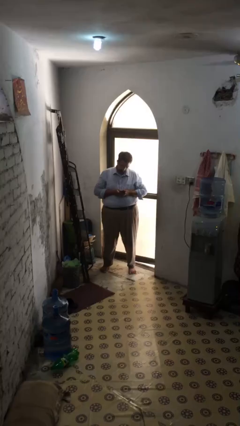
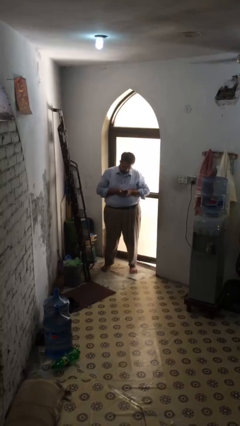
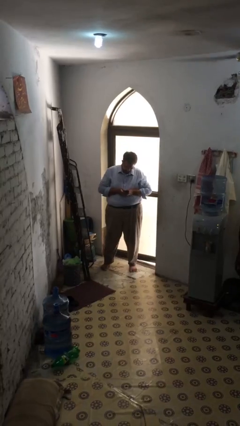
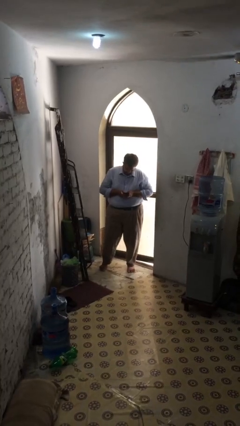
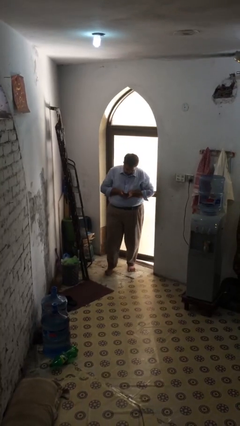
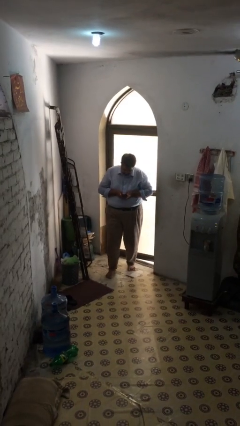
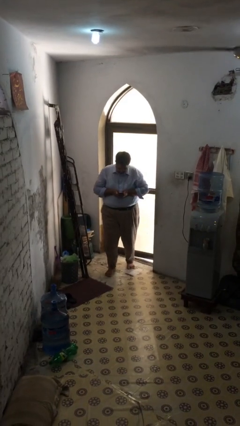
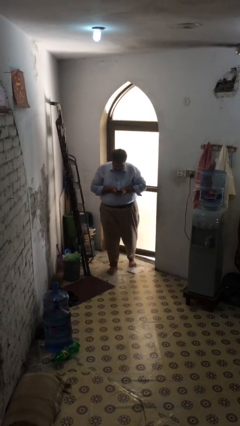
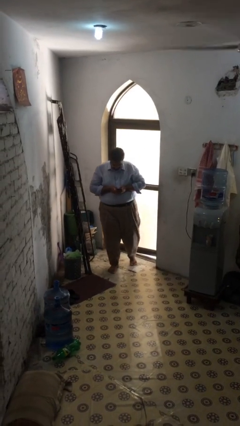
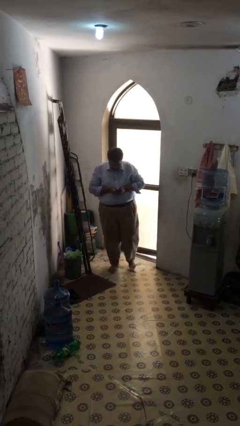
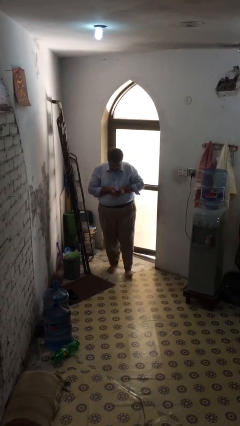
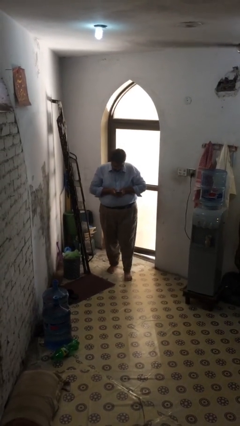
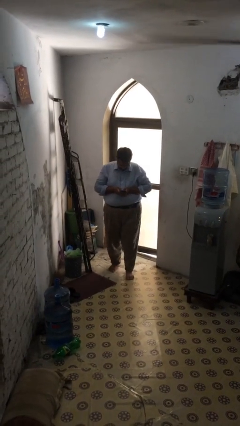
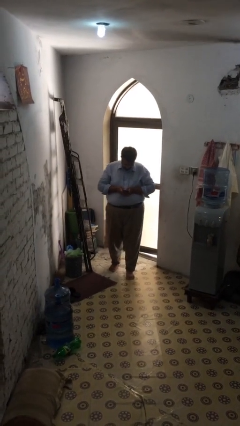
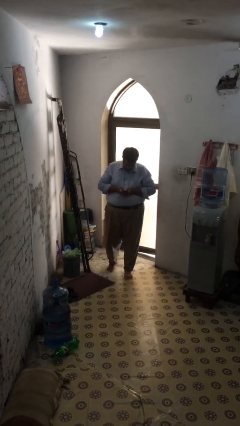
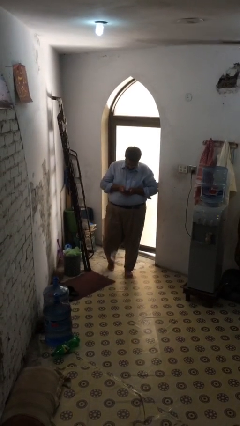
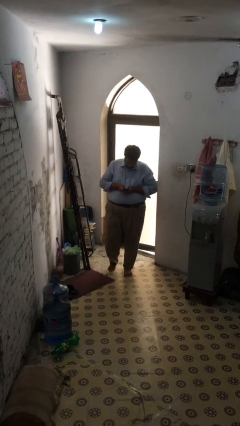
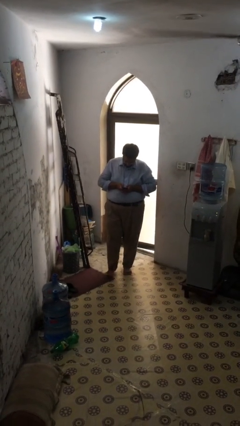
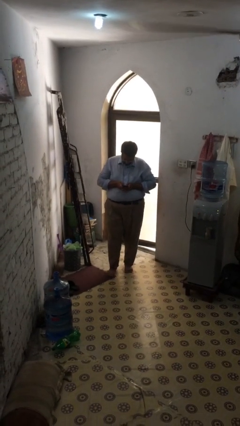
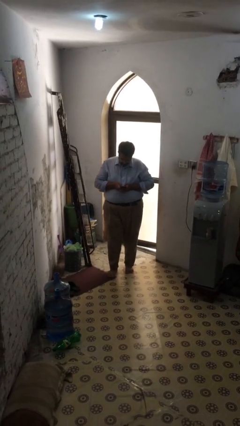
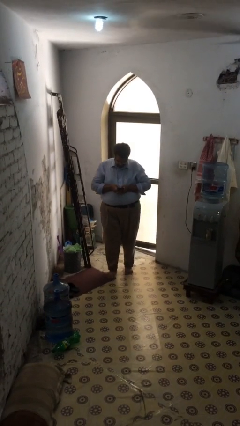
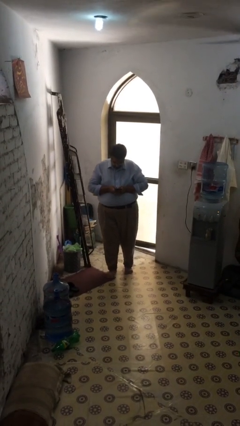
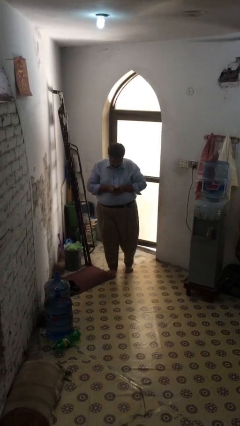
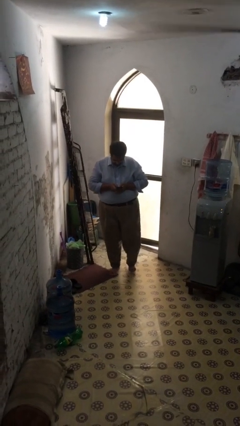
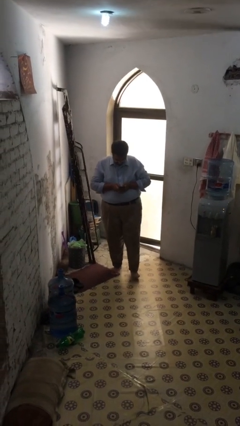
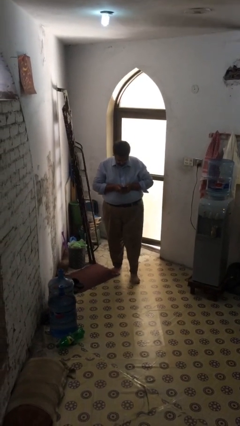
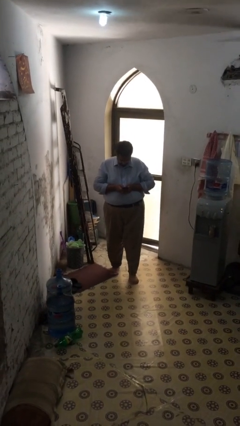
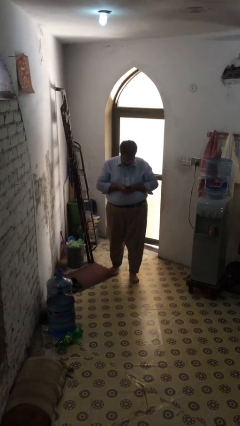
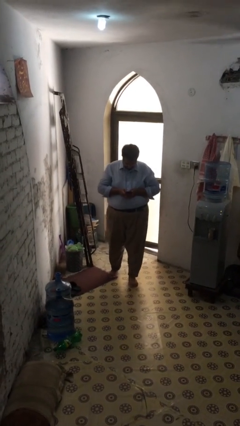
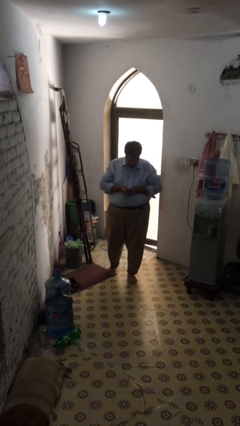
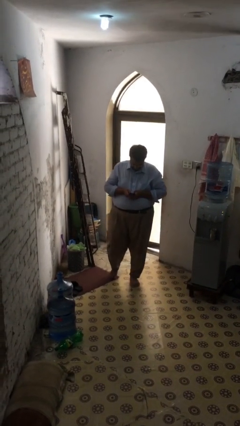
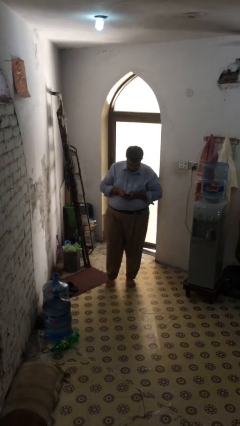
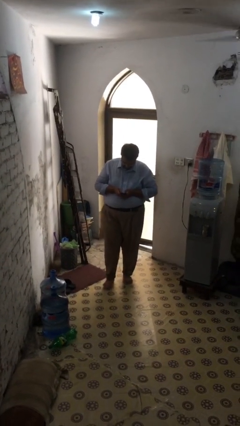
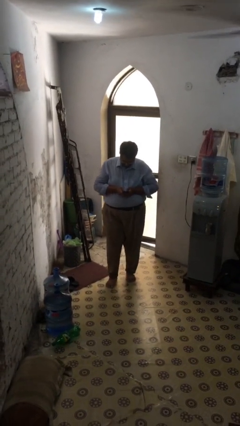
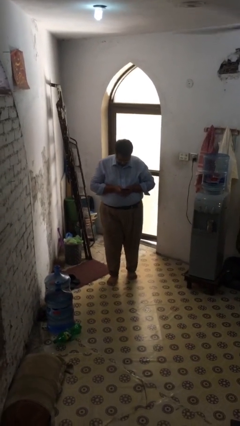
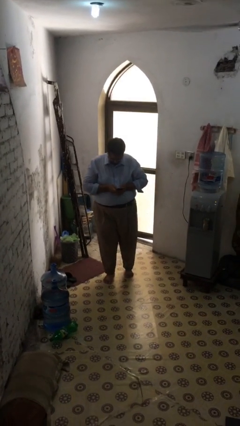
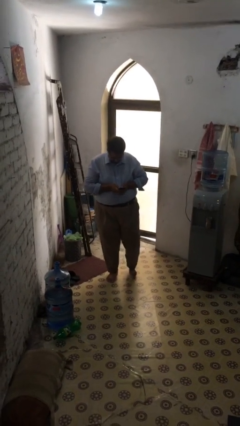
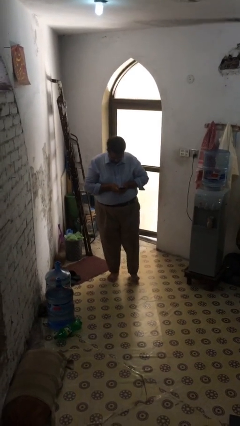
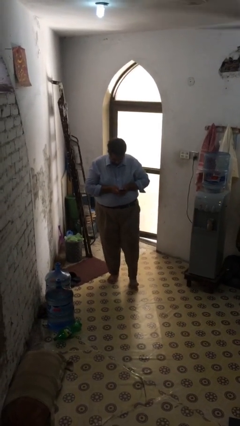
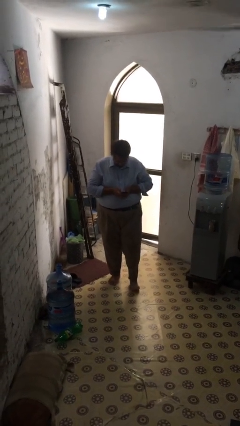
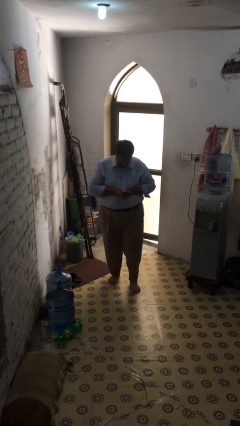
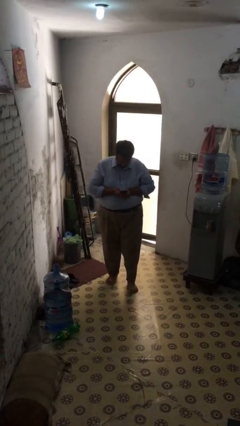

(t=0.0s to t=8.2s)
person texts on phone

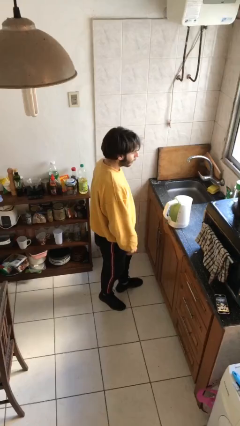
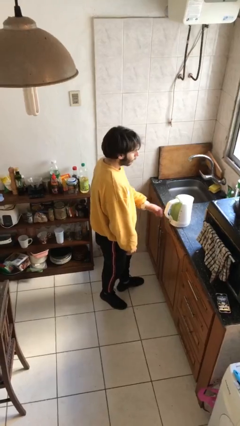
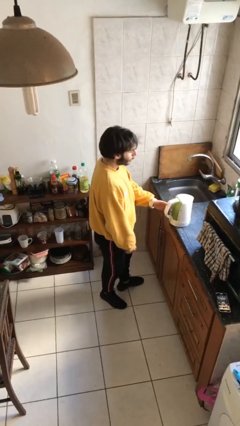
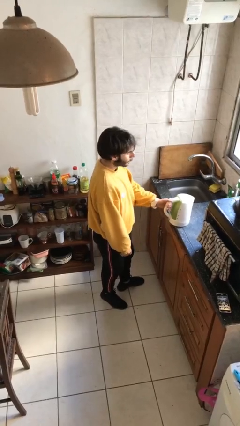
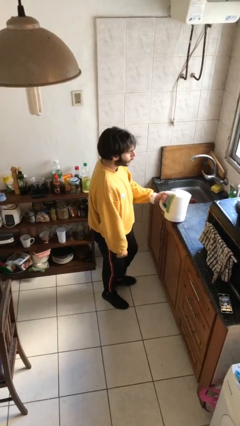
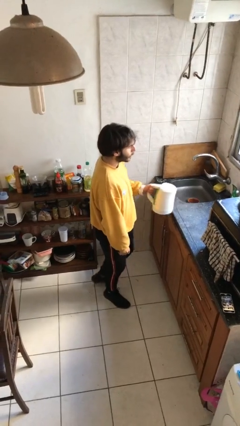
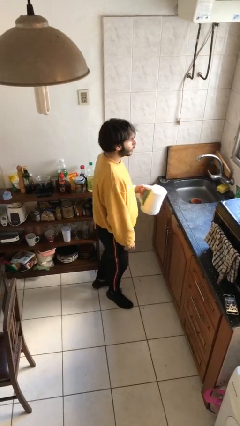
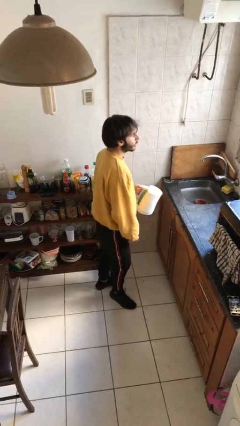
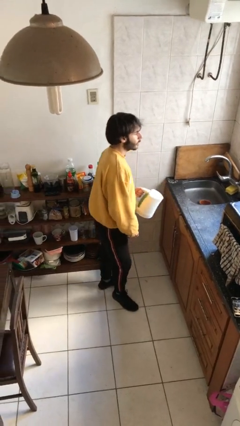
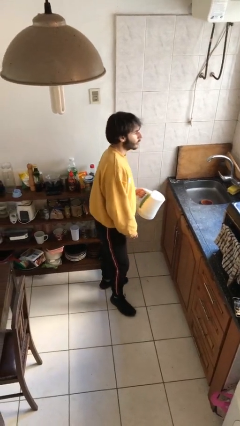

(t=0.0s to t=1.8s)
person picks up object from countertop

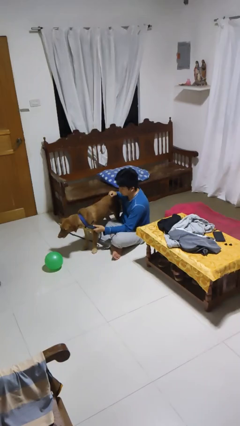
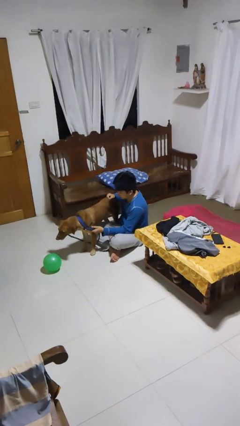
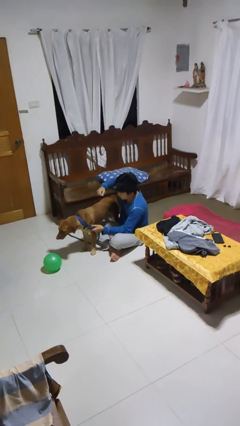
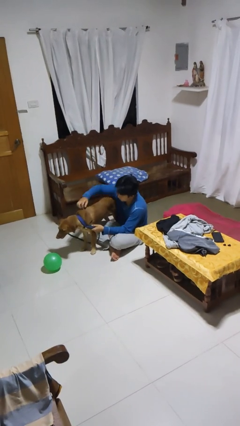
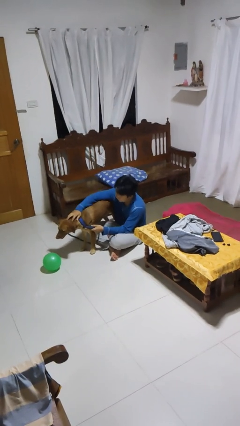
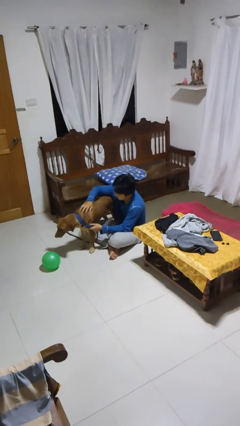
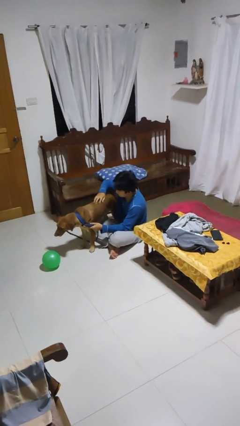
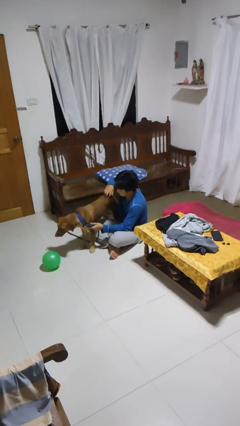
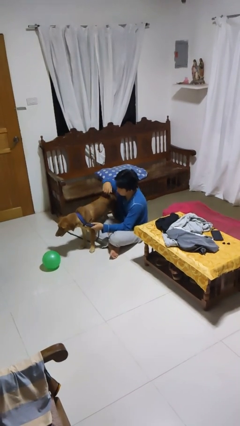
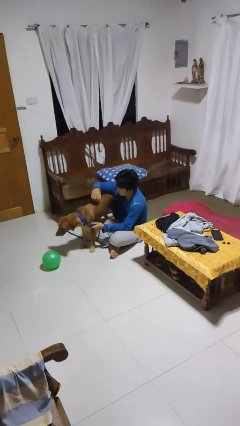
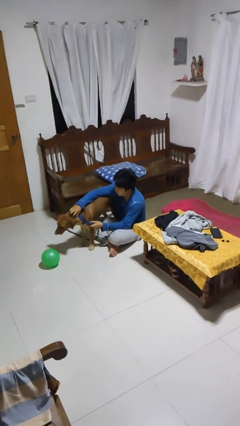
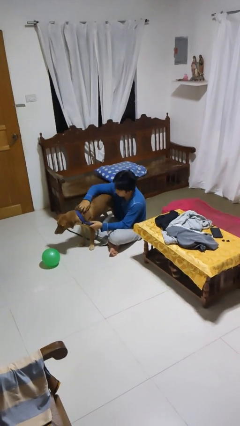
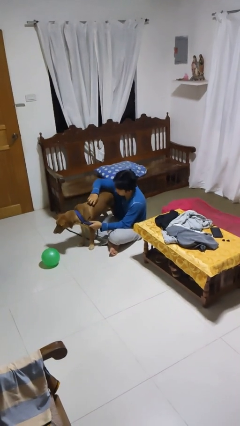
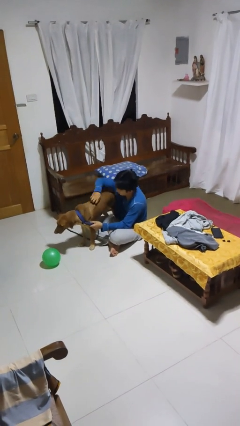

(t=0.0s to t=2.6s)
person pets dog

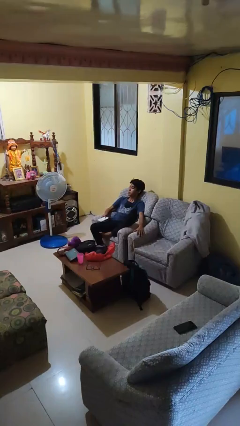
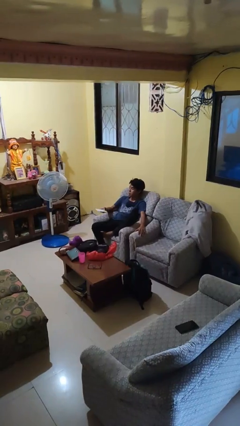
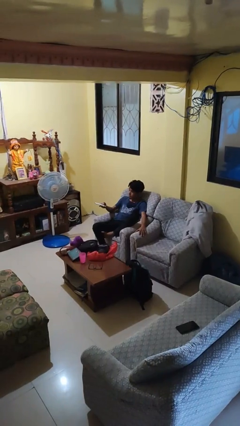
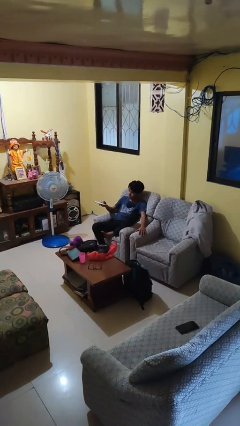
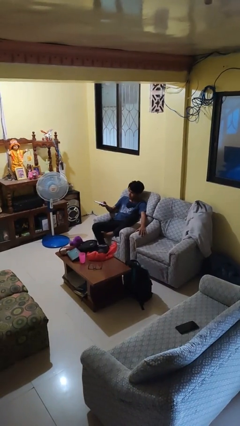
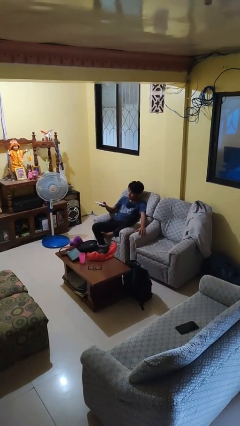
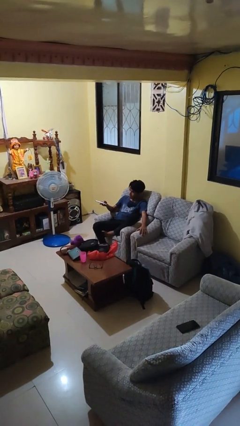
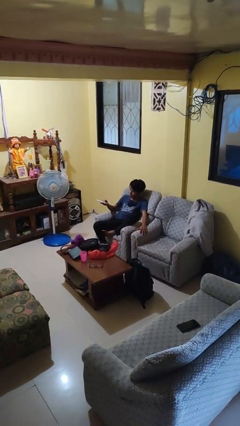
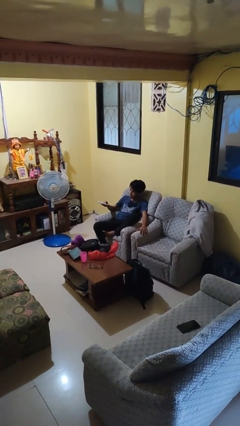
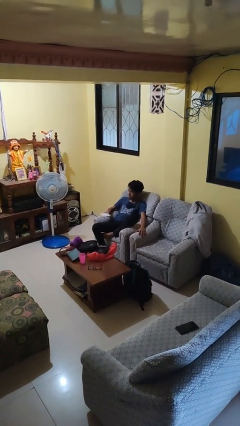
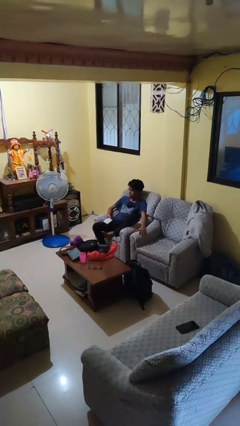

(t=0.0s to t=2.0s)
person uses television remote

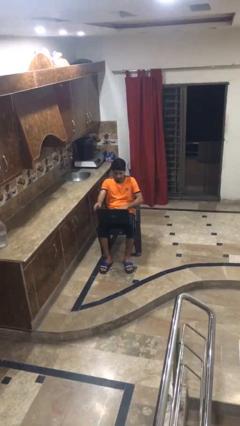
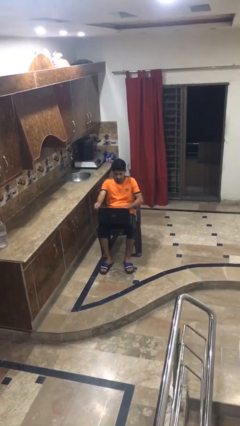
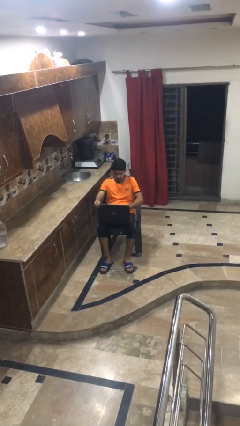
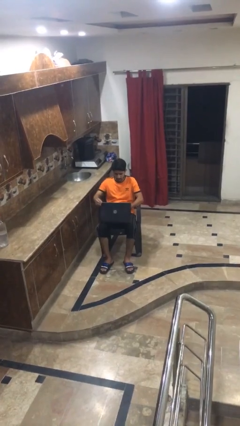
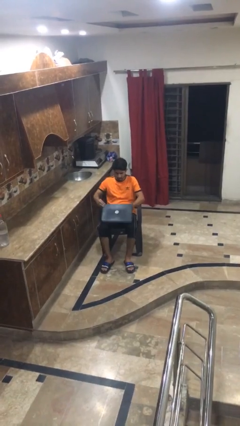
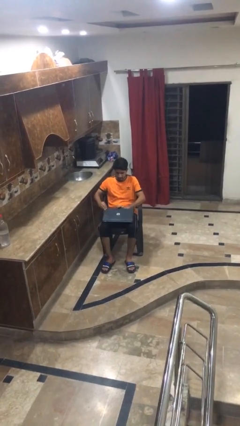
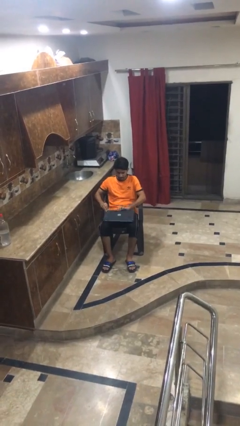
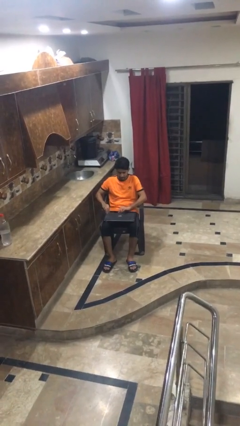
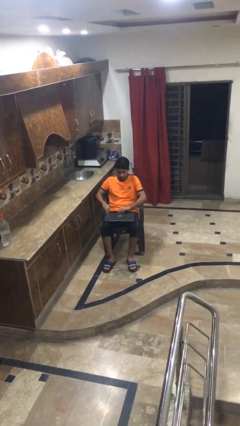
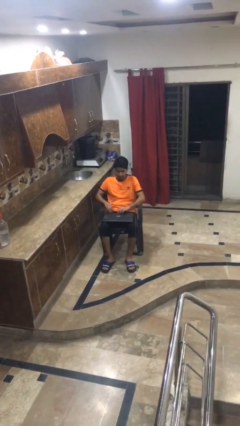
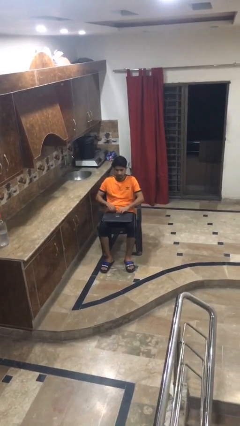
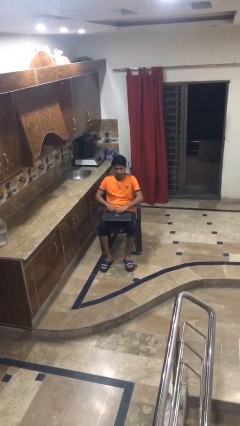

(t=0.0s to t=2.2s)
person closes laptop

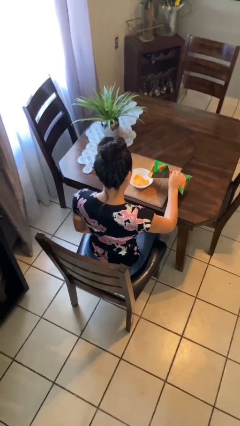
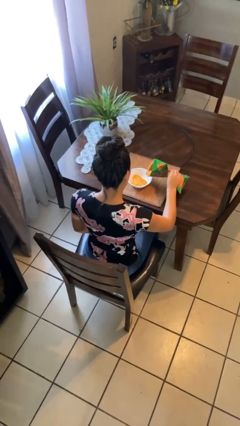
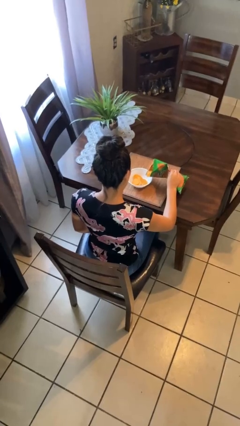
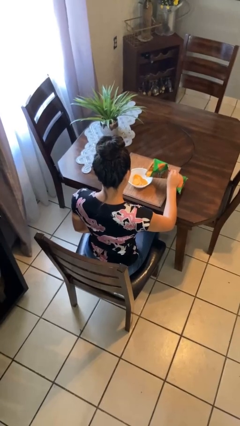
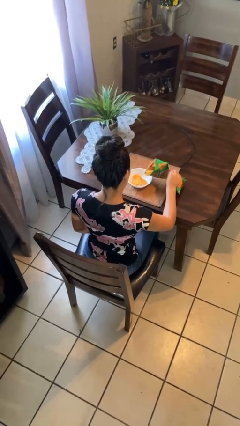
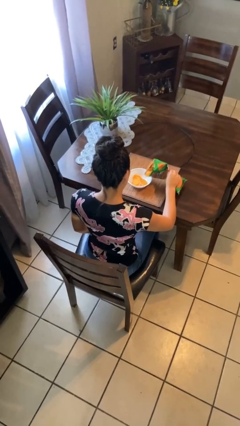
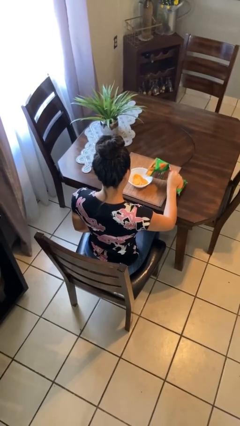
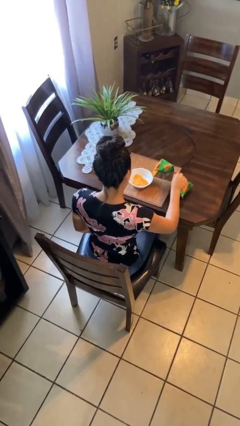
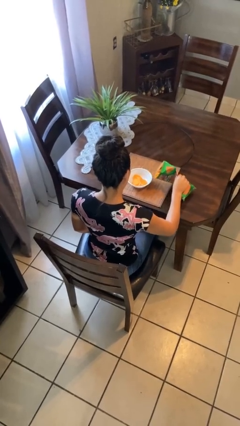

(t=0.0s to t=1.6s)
person pours into bowl
